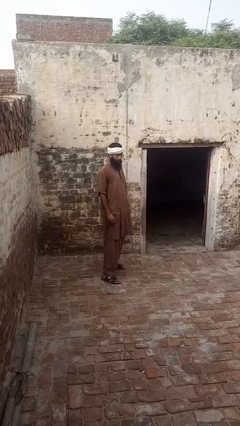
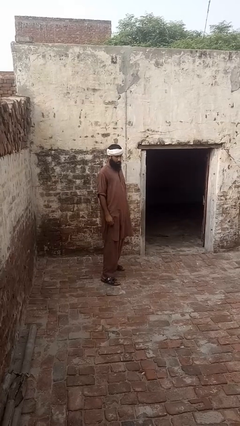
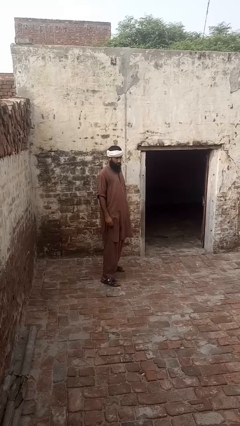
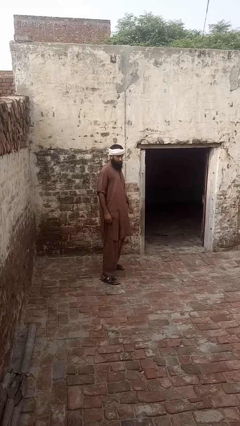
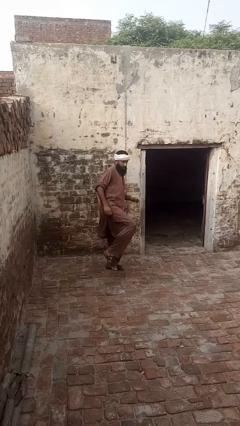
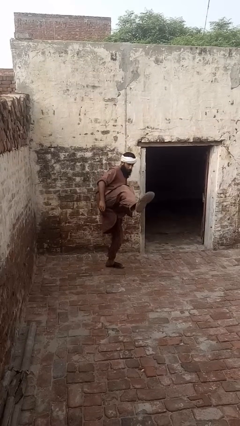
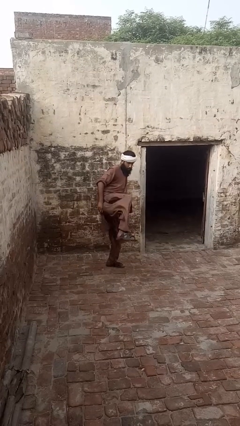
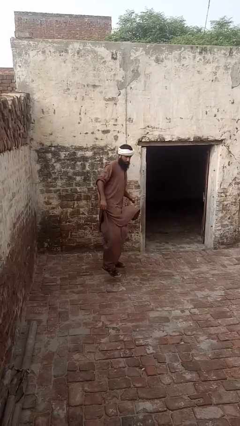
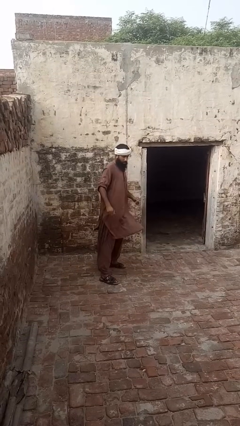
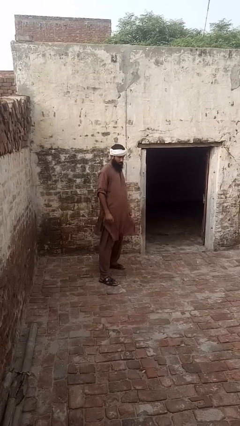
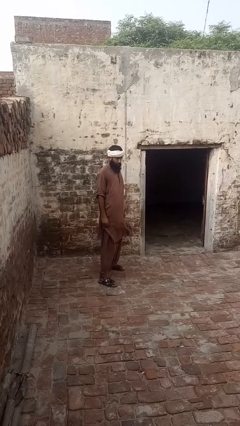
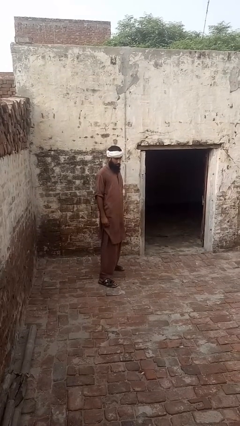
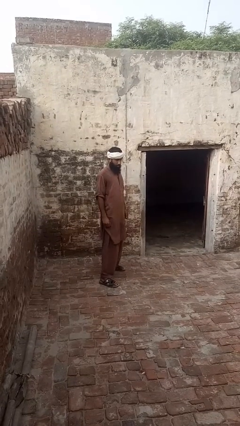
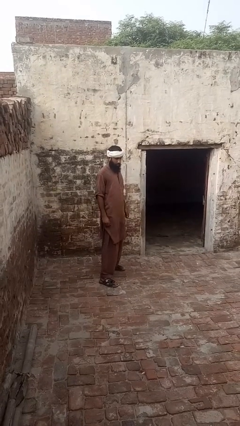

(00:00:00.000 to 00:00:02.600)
person karate kicks

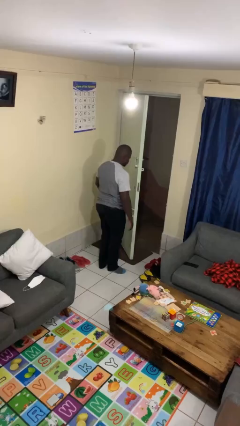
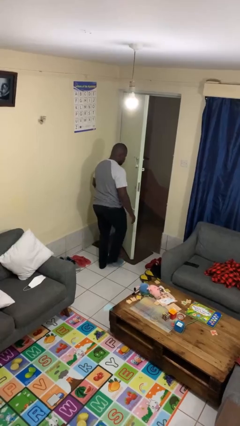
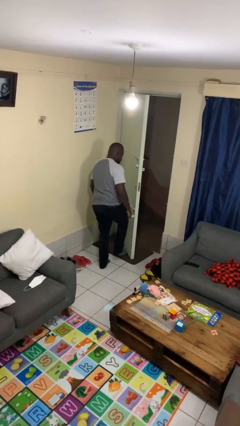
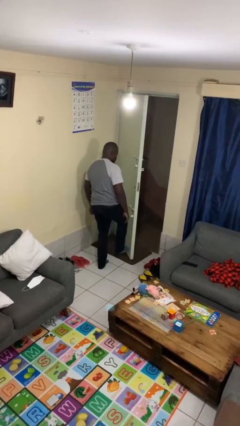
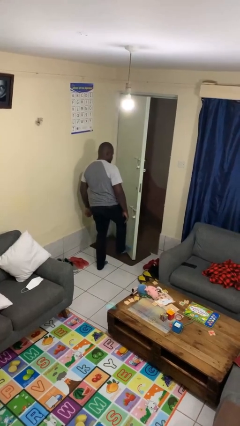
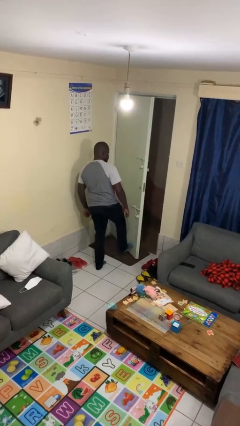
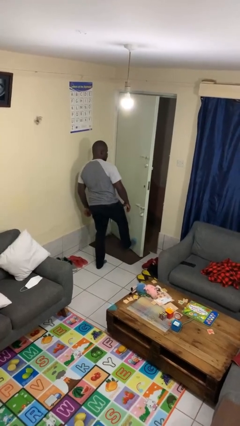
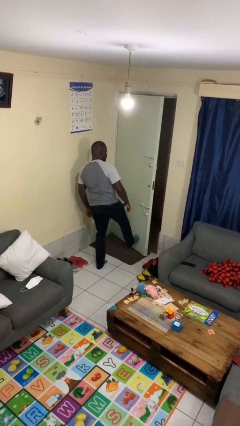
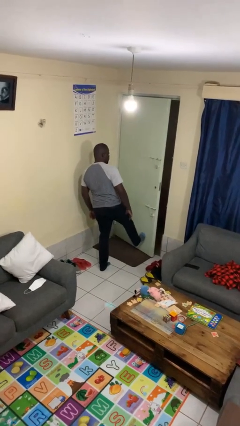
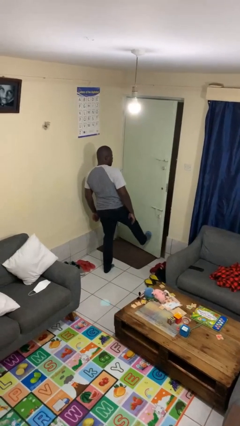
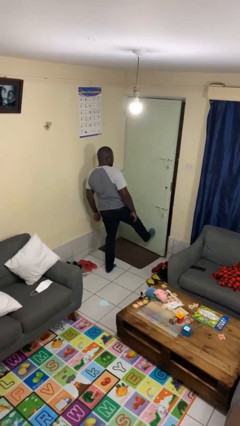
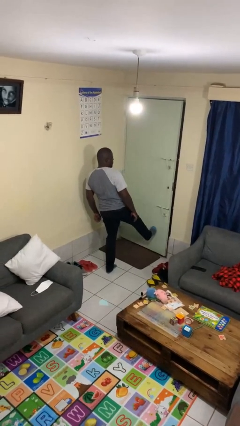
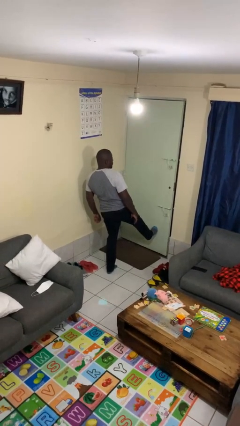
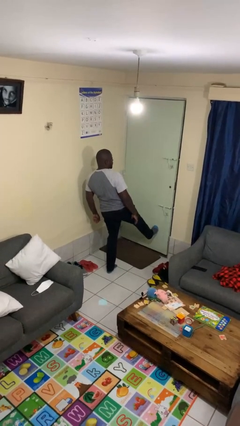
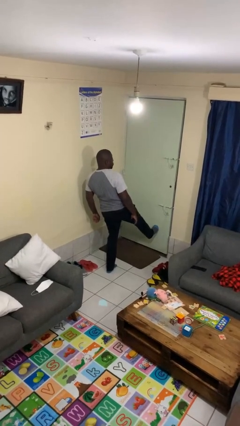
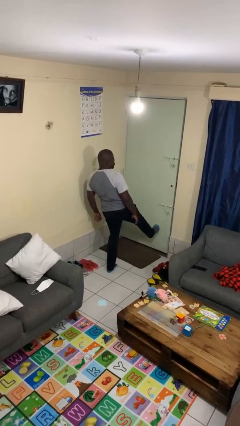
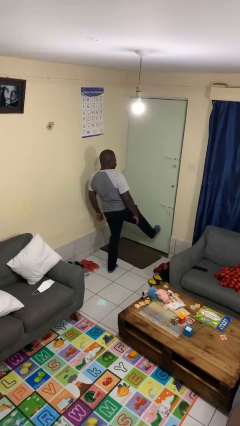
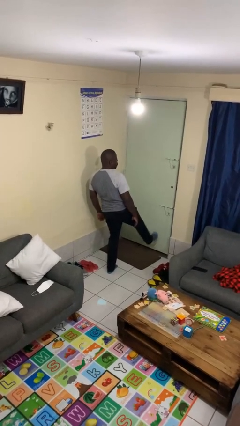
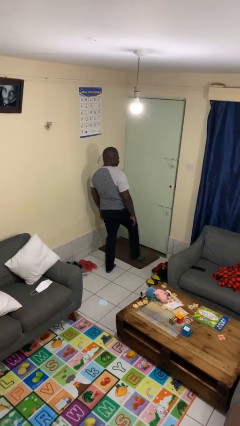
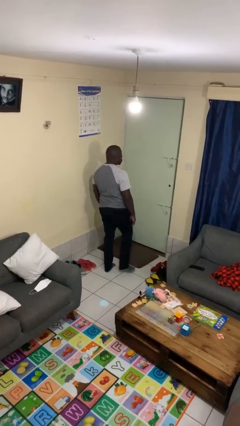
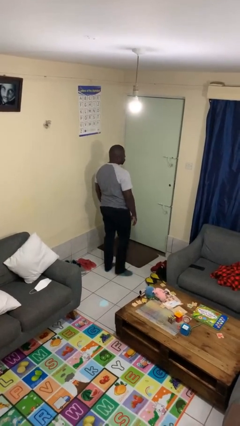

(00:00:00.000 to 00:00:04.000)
person closes door with foot

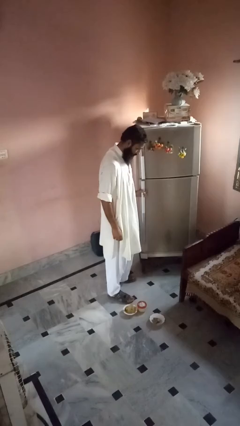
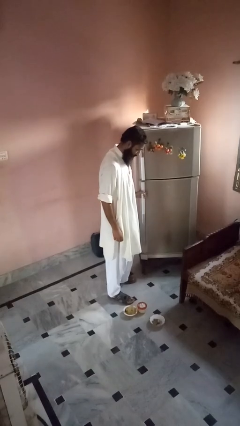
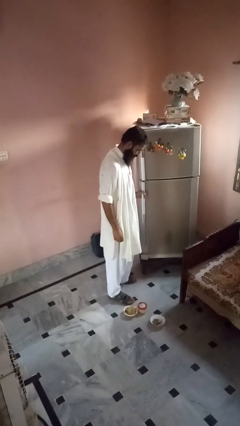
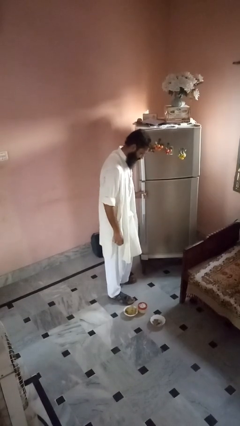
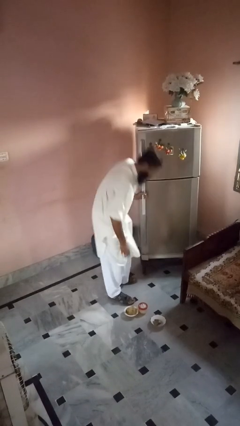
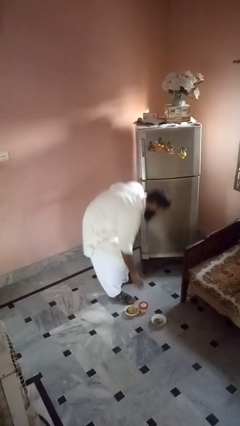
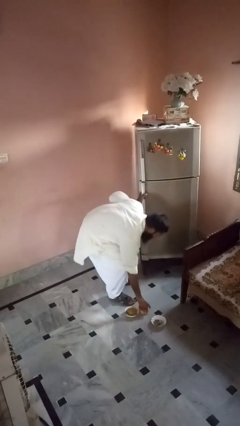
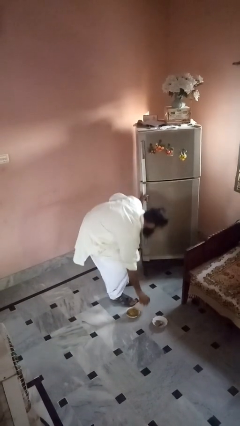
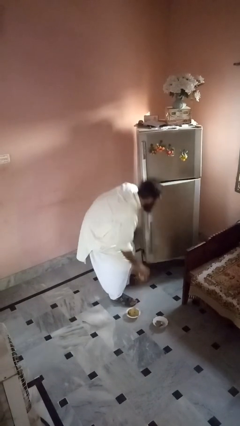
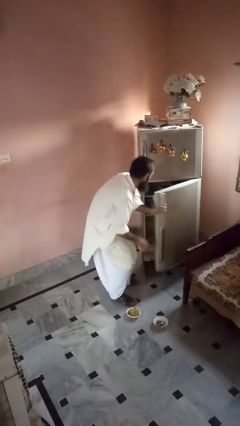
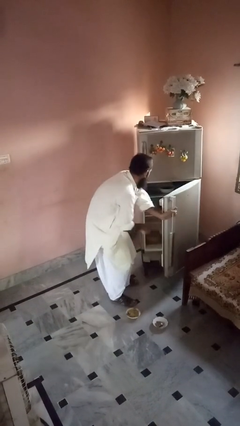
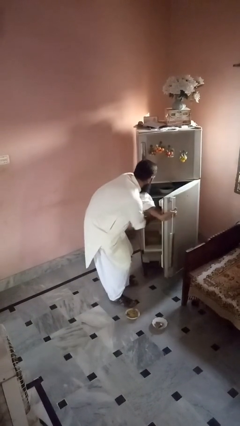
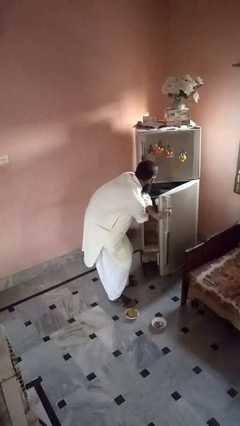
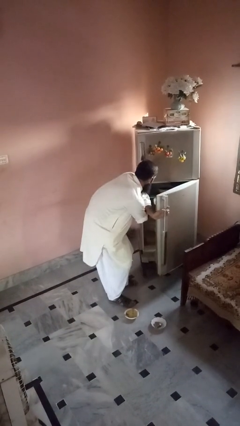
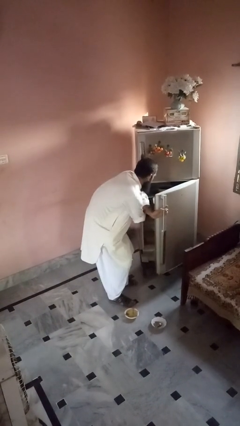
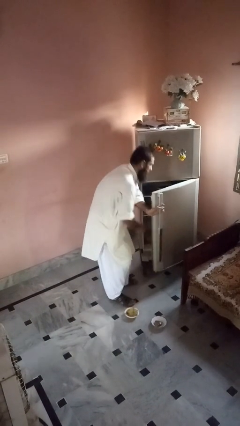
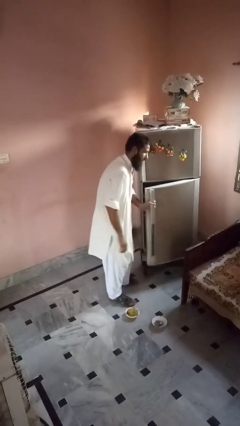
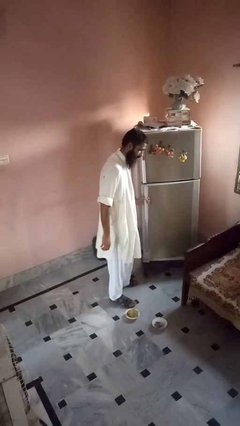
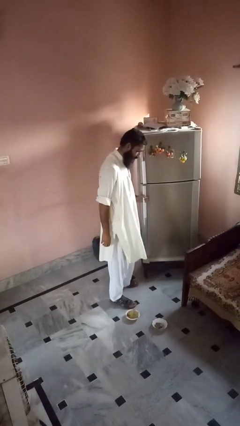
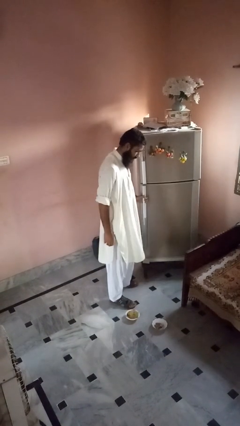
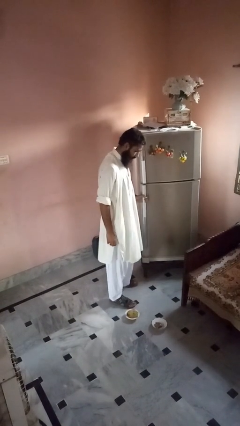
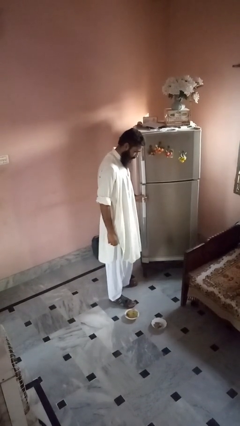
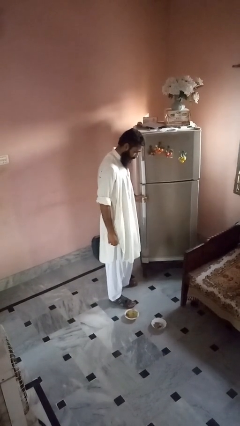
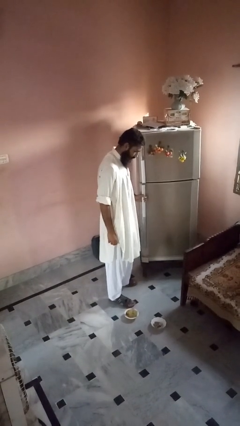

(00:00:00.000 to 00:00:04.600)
person loads groceries into refrigerator

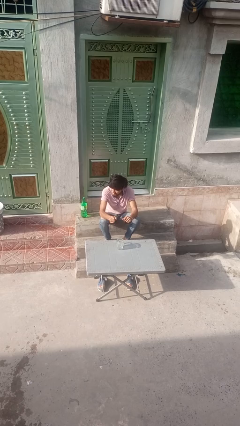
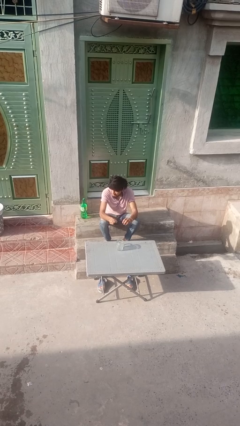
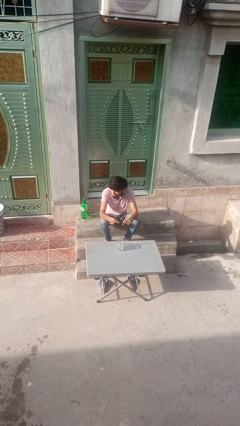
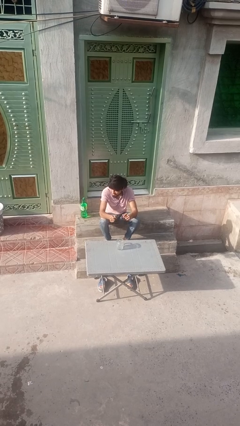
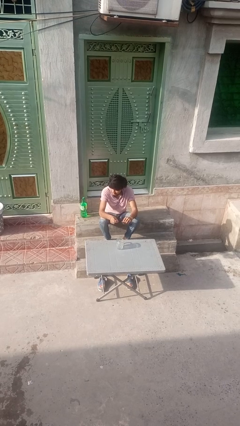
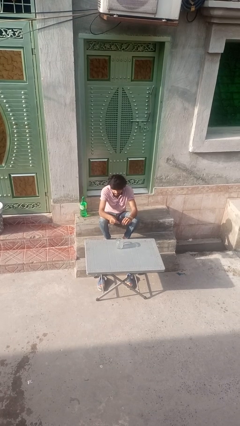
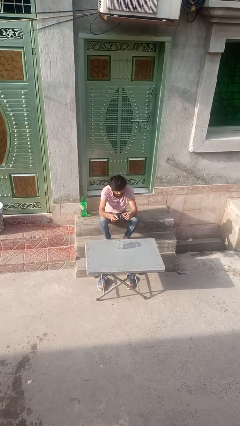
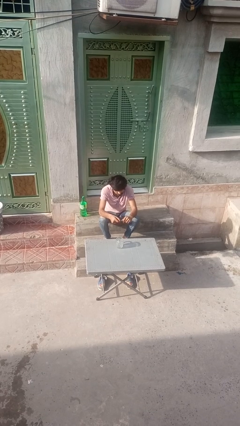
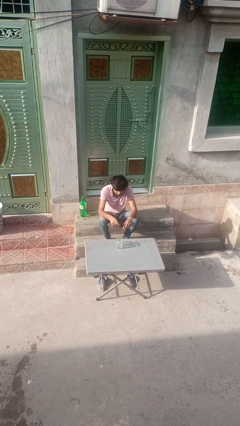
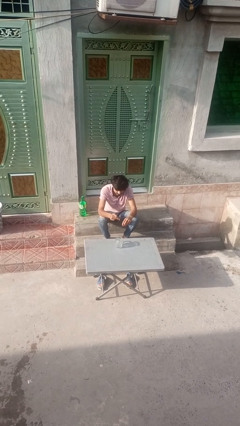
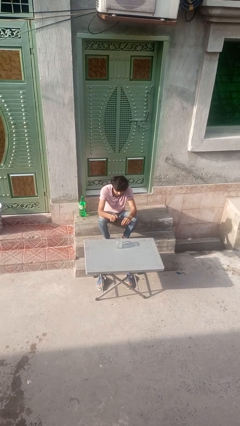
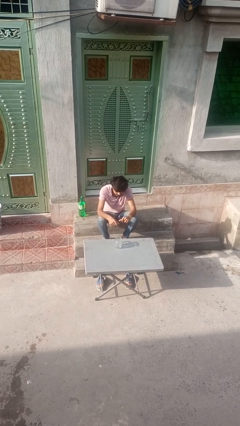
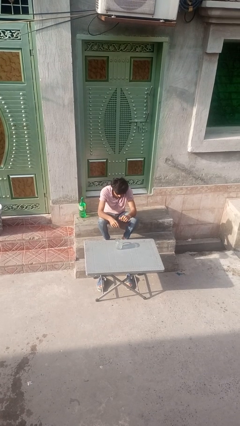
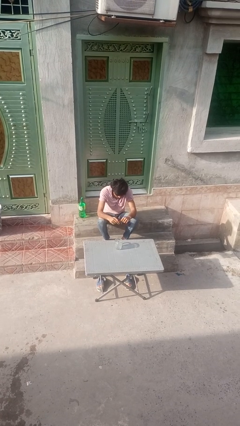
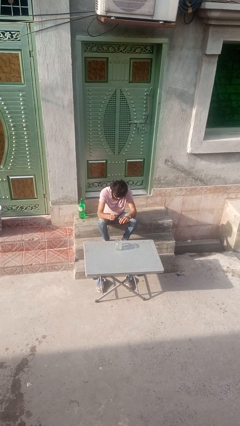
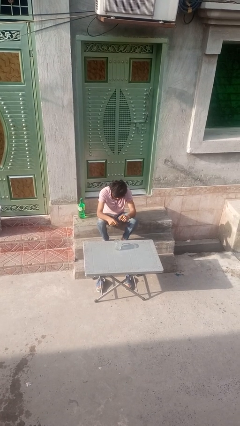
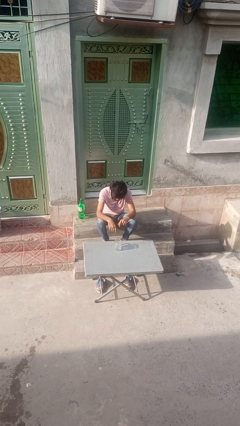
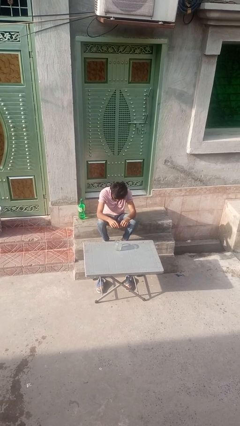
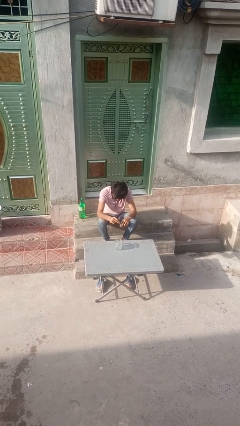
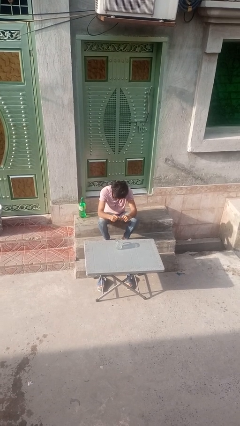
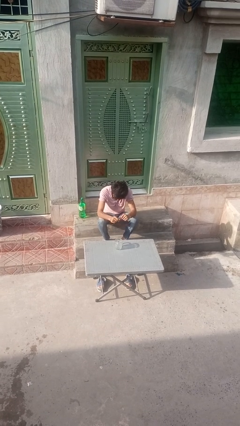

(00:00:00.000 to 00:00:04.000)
person snaps fingers

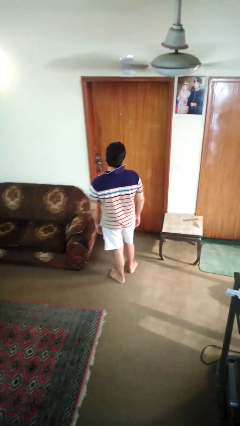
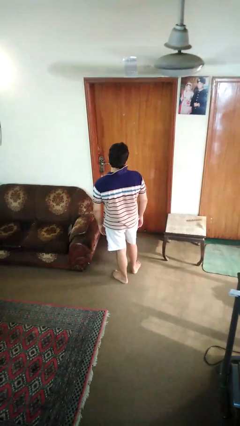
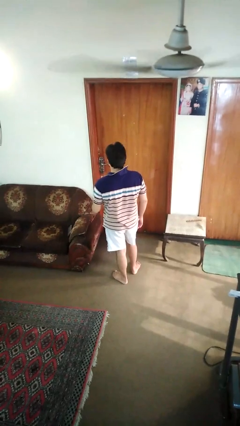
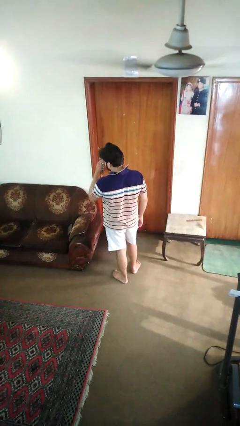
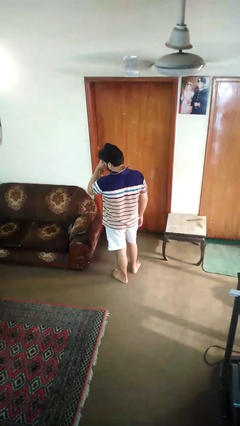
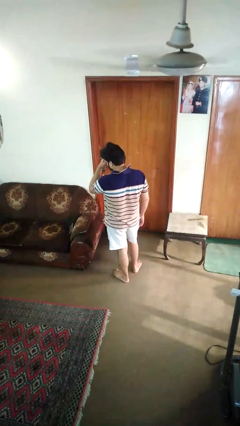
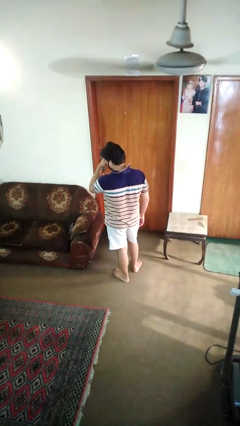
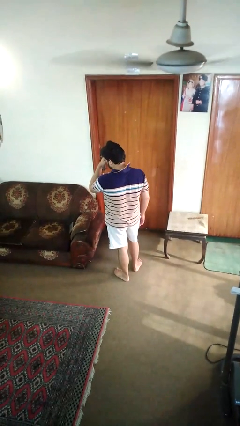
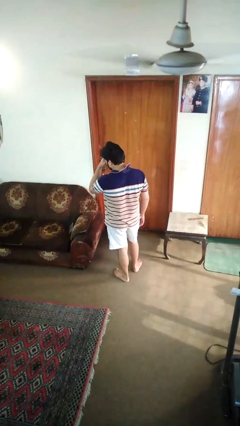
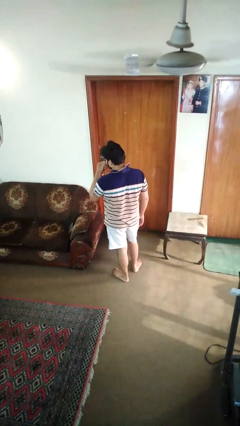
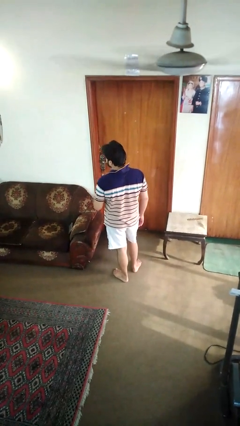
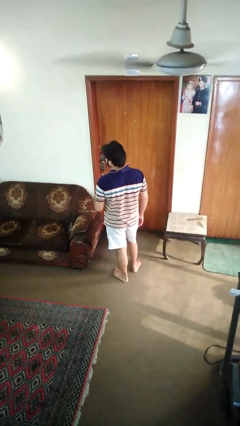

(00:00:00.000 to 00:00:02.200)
person rubs eyes
